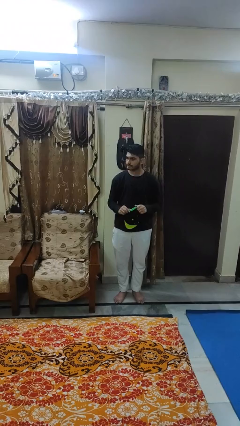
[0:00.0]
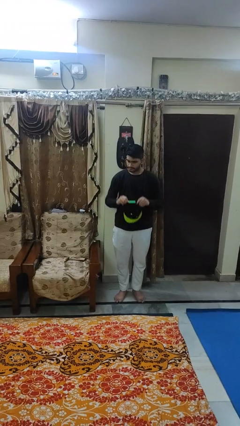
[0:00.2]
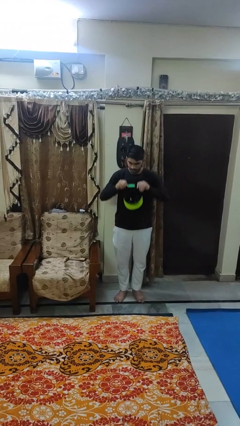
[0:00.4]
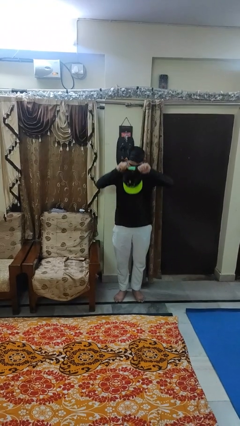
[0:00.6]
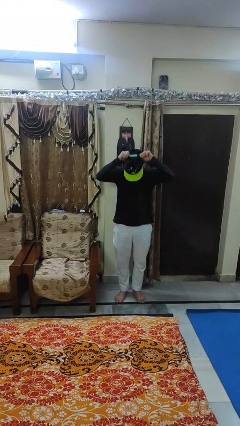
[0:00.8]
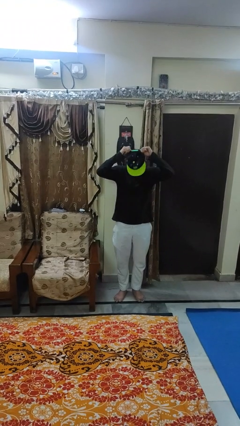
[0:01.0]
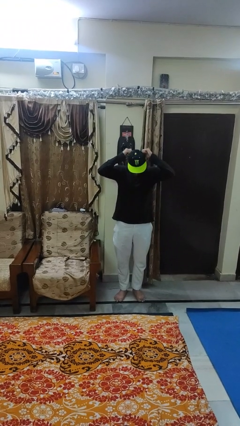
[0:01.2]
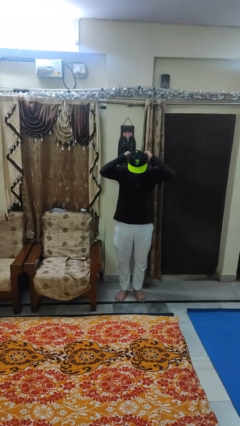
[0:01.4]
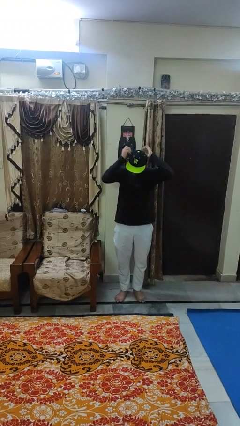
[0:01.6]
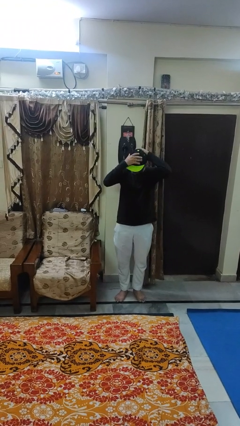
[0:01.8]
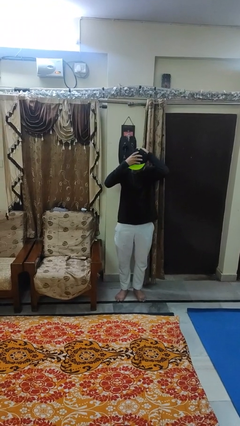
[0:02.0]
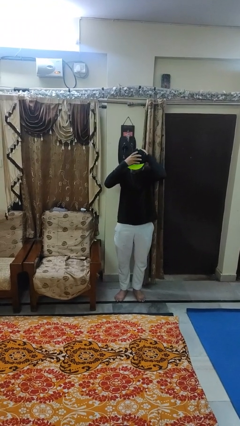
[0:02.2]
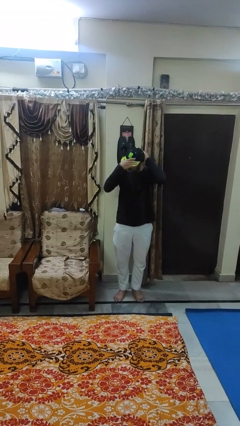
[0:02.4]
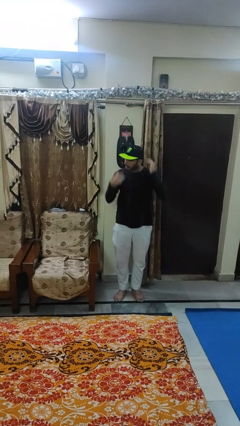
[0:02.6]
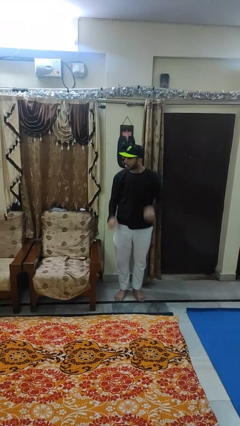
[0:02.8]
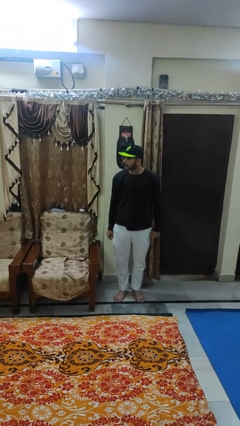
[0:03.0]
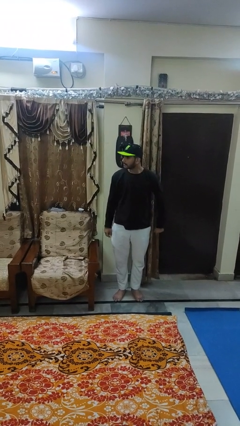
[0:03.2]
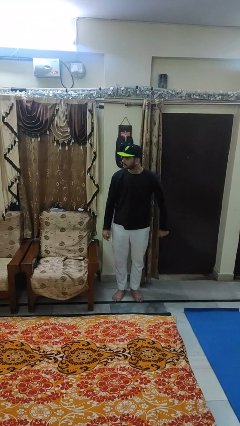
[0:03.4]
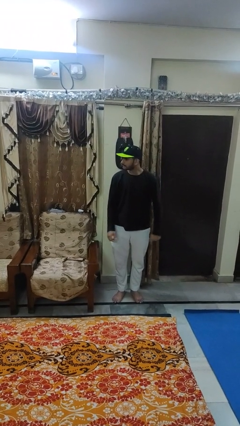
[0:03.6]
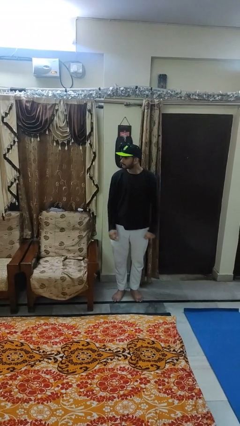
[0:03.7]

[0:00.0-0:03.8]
person puts on hat

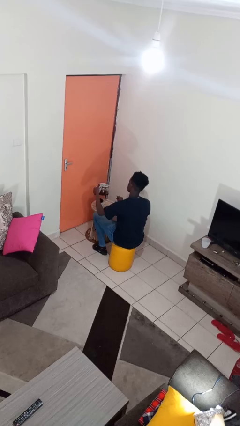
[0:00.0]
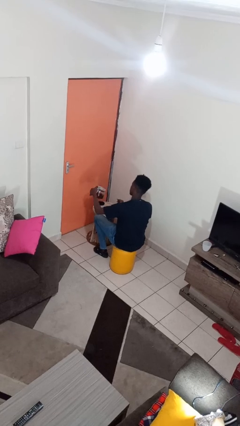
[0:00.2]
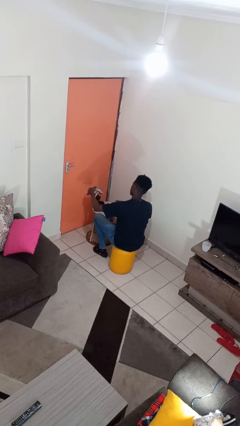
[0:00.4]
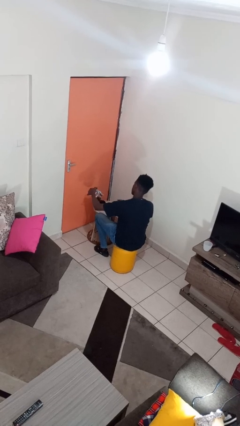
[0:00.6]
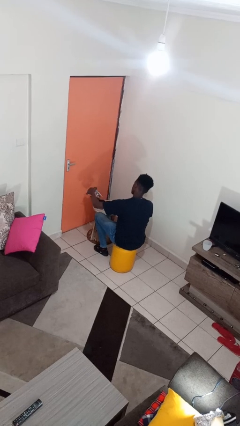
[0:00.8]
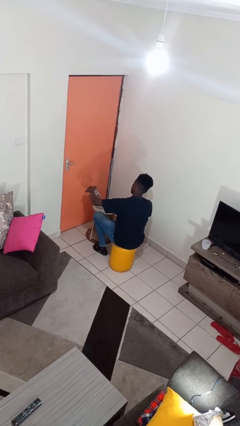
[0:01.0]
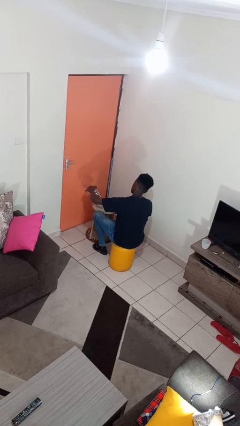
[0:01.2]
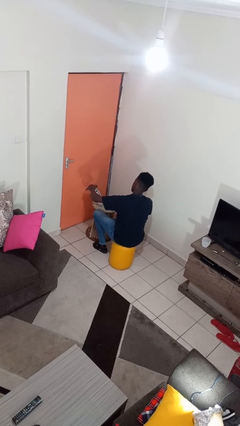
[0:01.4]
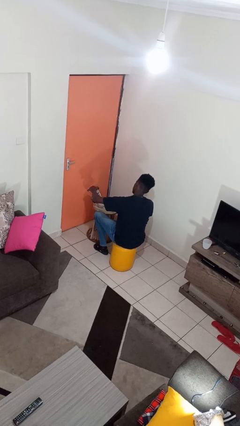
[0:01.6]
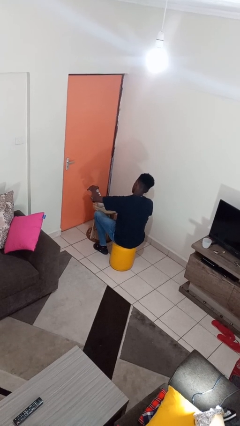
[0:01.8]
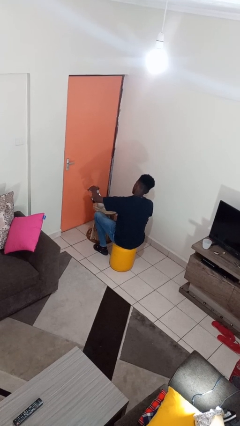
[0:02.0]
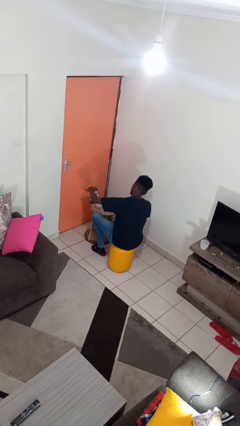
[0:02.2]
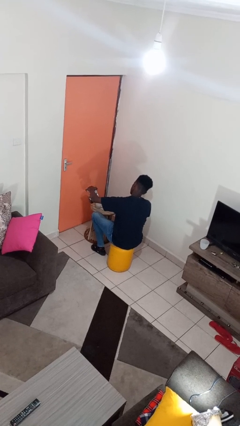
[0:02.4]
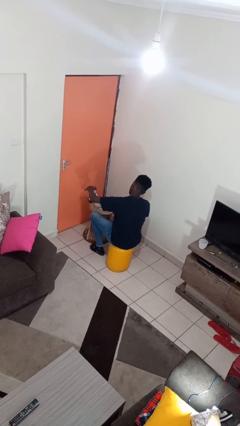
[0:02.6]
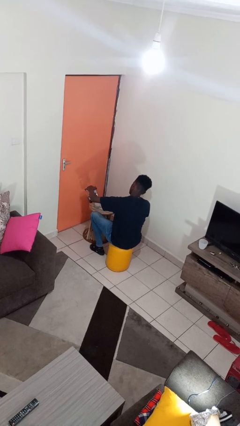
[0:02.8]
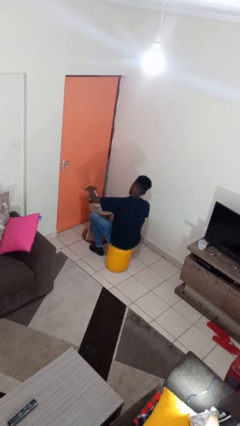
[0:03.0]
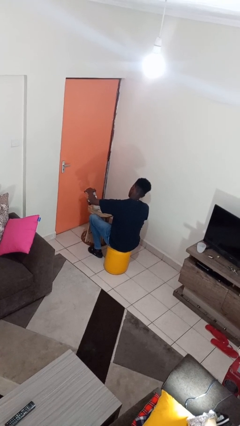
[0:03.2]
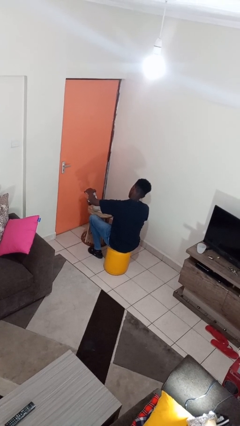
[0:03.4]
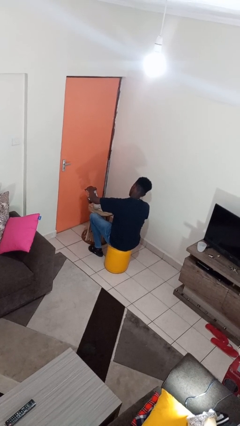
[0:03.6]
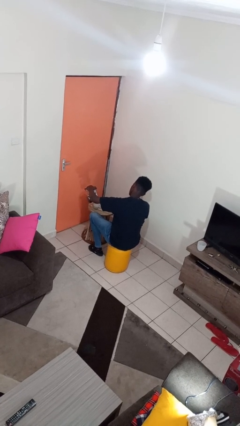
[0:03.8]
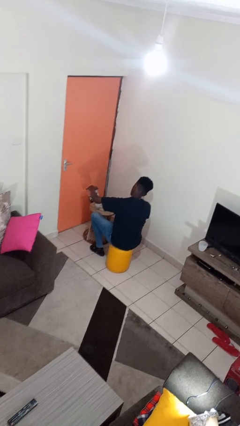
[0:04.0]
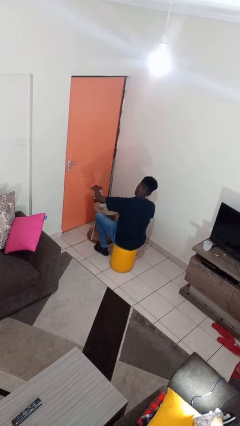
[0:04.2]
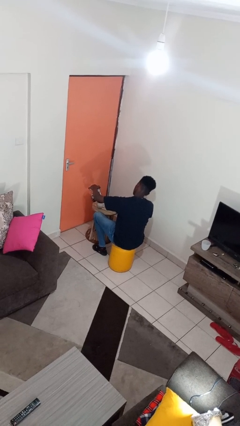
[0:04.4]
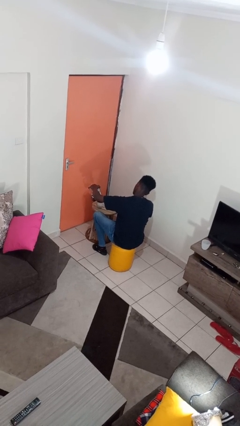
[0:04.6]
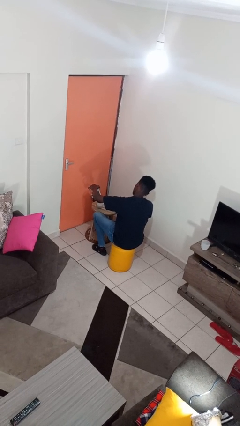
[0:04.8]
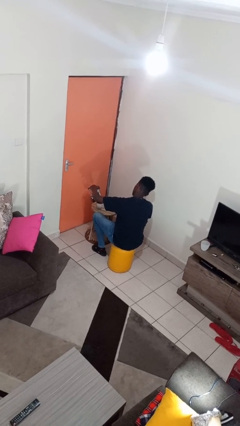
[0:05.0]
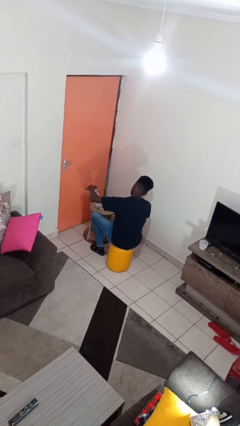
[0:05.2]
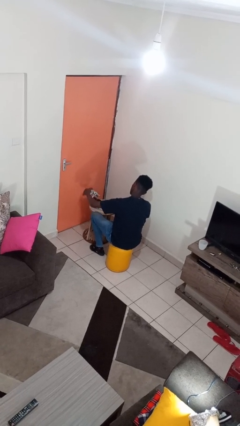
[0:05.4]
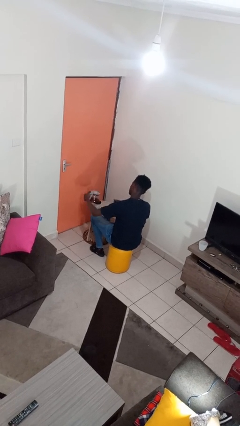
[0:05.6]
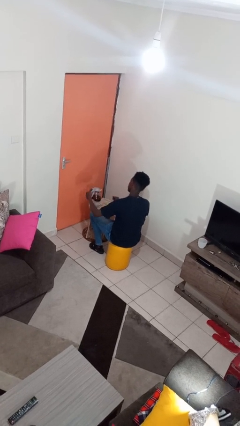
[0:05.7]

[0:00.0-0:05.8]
person pours coffee into mug

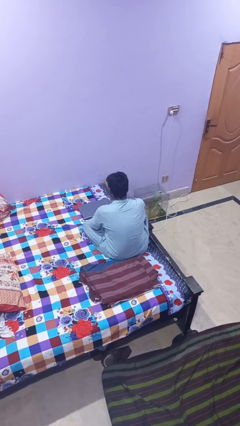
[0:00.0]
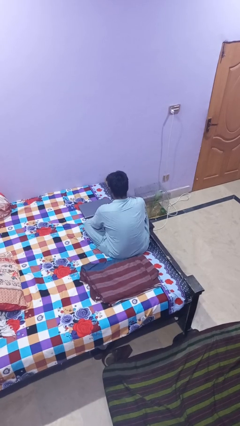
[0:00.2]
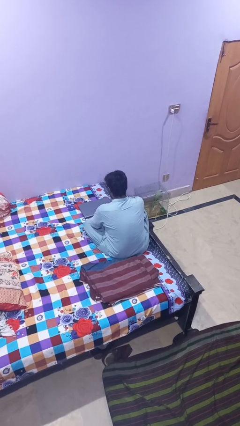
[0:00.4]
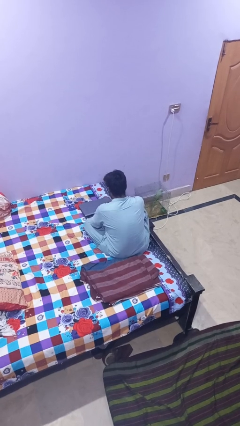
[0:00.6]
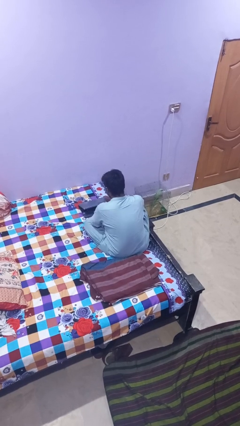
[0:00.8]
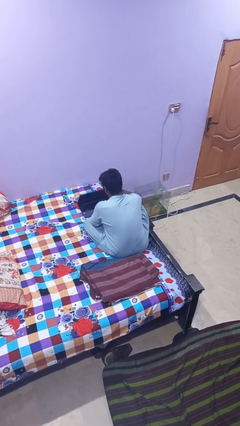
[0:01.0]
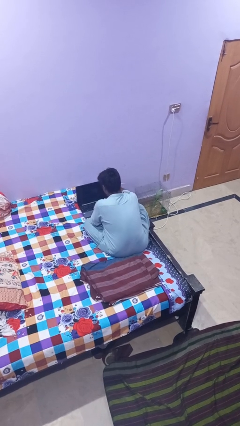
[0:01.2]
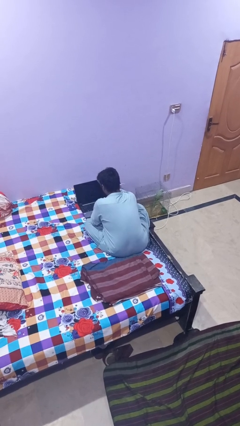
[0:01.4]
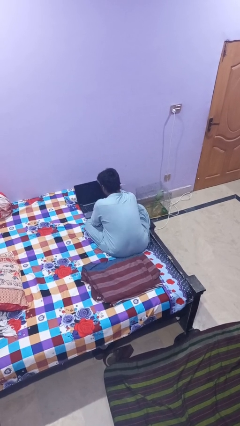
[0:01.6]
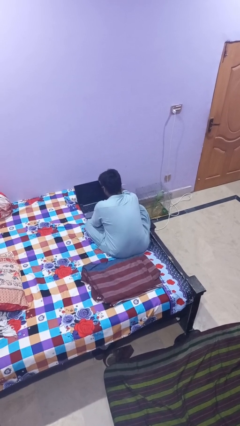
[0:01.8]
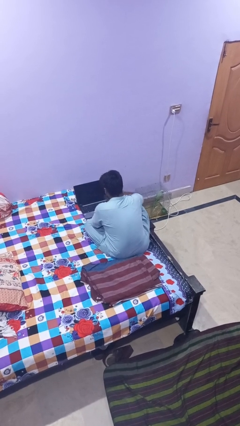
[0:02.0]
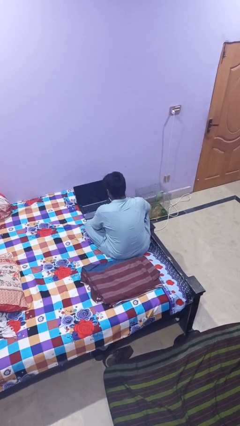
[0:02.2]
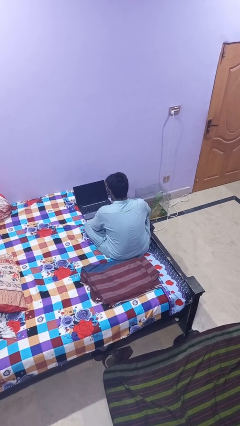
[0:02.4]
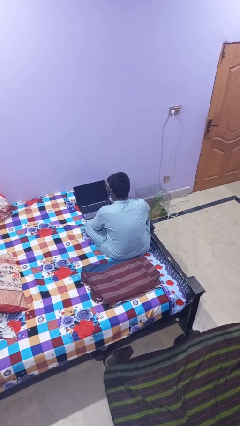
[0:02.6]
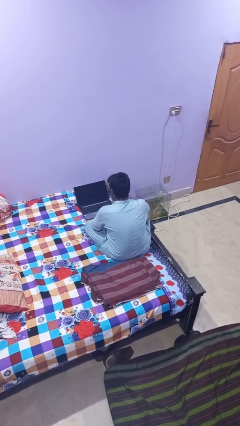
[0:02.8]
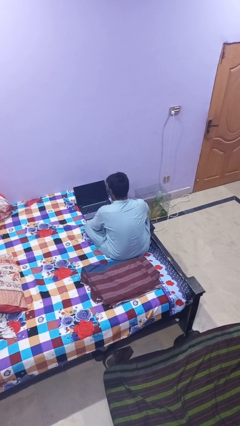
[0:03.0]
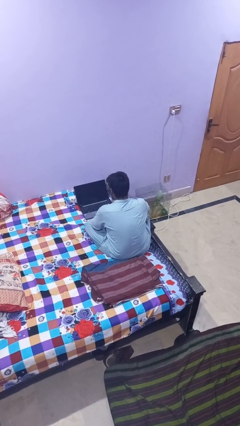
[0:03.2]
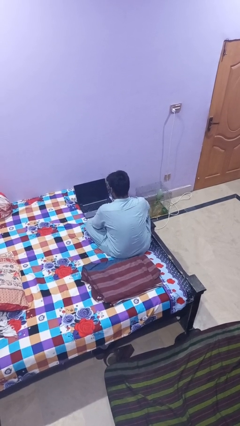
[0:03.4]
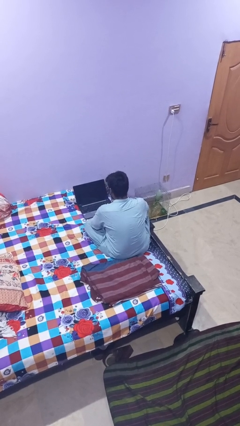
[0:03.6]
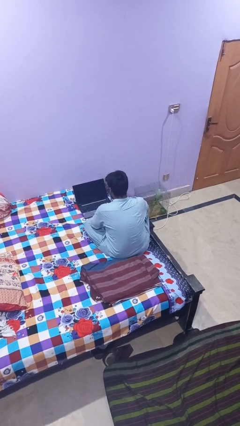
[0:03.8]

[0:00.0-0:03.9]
person opens laptop

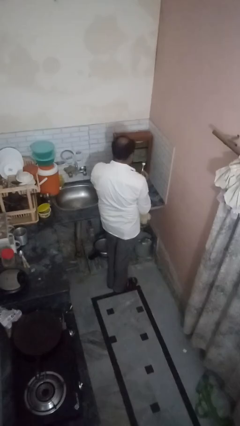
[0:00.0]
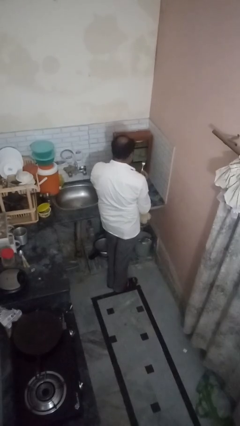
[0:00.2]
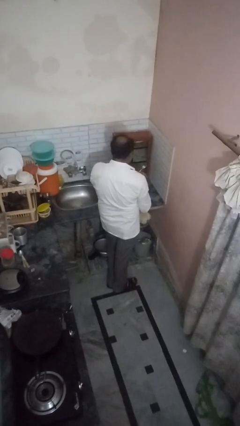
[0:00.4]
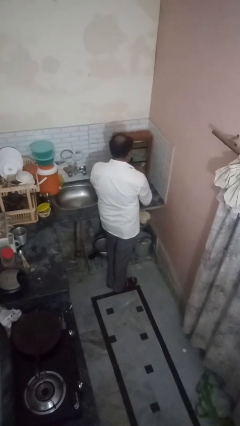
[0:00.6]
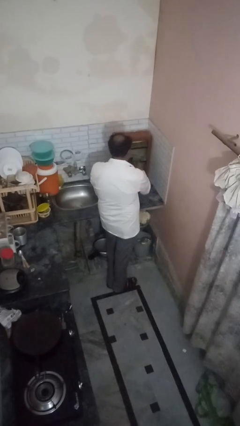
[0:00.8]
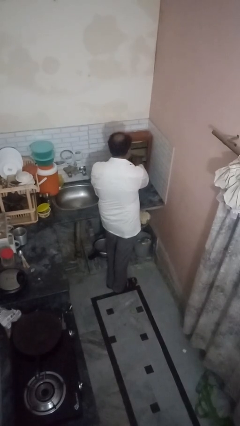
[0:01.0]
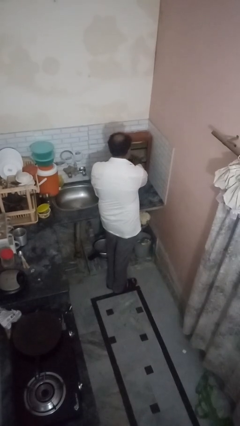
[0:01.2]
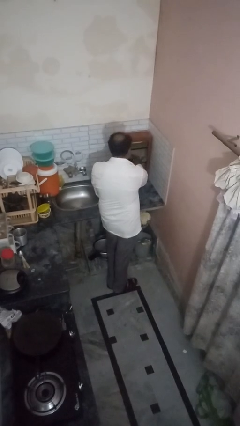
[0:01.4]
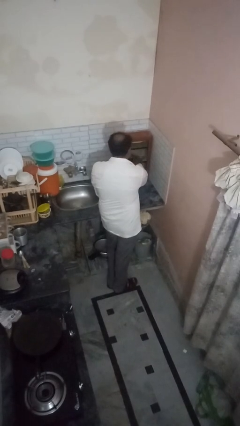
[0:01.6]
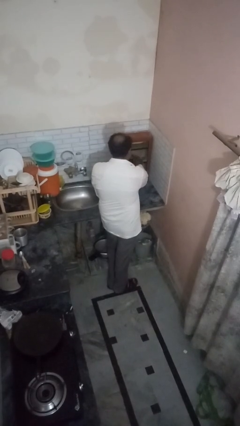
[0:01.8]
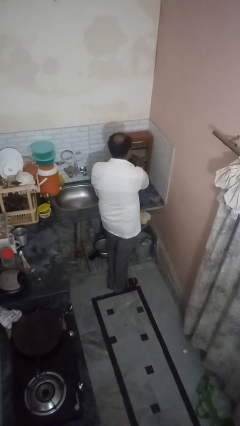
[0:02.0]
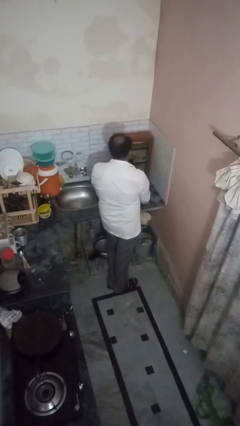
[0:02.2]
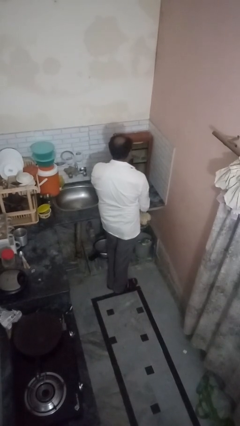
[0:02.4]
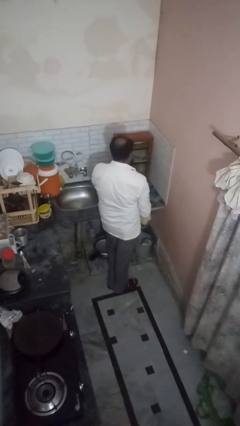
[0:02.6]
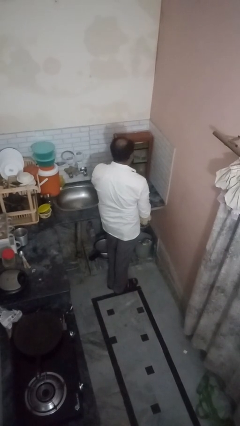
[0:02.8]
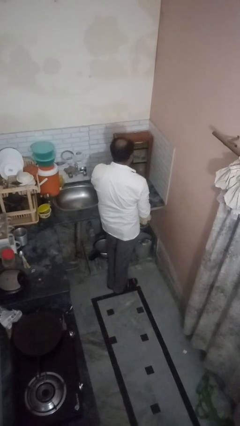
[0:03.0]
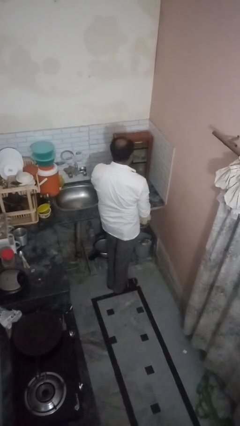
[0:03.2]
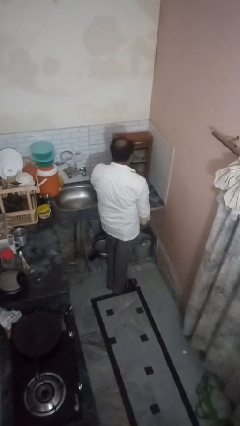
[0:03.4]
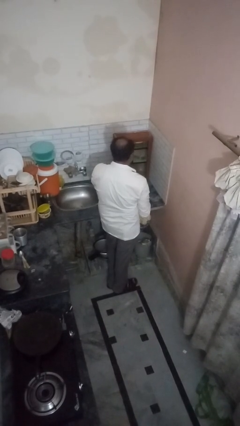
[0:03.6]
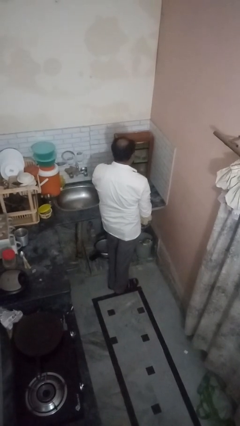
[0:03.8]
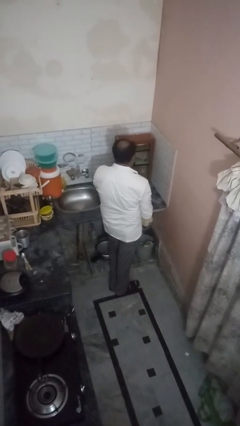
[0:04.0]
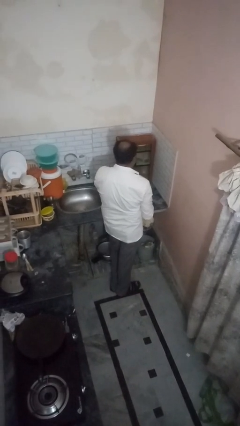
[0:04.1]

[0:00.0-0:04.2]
person puts object into kitchen drawer
